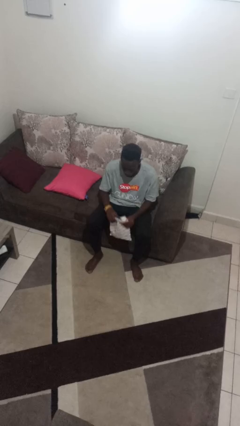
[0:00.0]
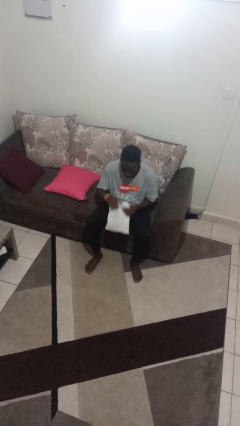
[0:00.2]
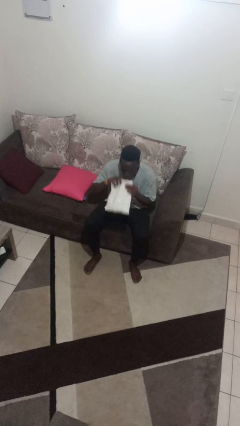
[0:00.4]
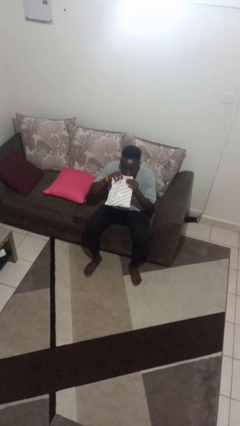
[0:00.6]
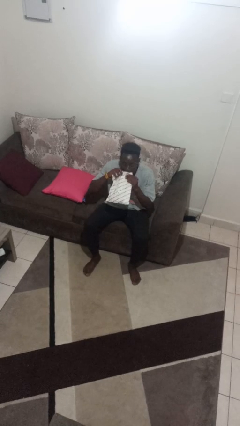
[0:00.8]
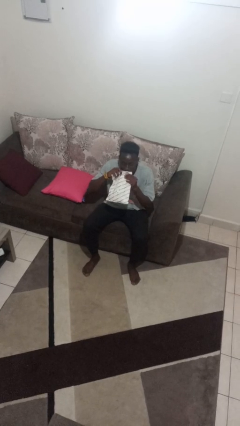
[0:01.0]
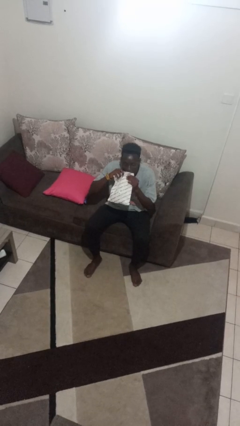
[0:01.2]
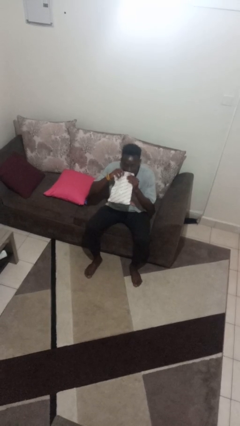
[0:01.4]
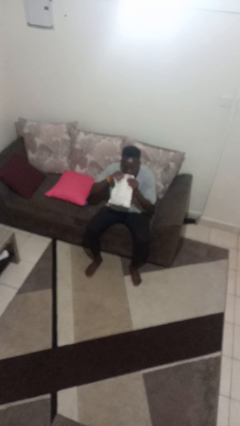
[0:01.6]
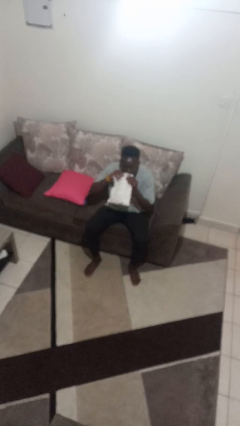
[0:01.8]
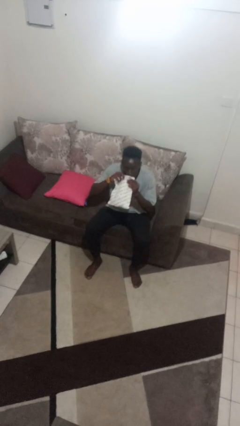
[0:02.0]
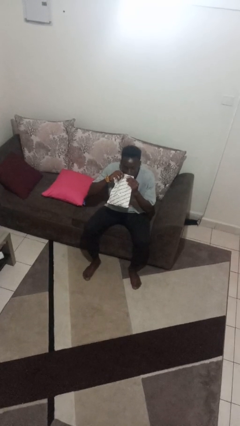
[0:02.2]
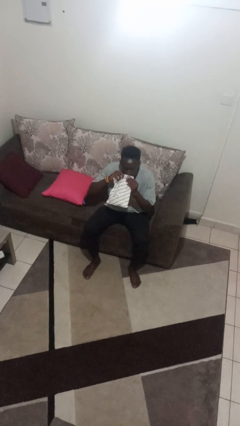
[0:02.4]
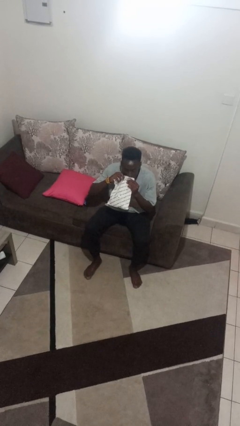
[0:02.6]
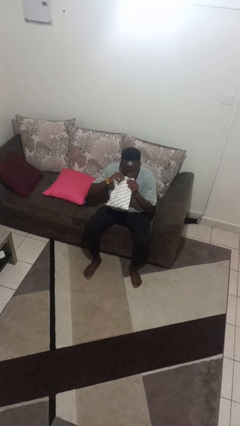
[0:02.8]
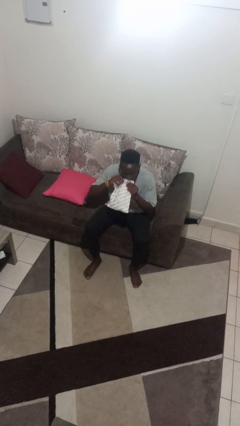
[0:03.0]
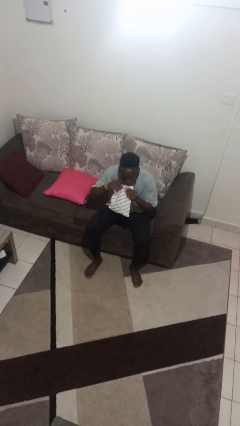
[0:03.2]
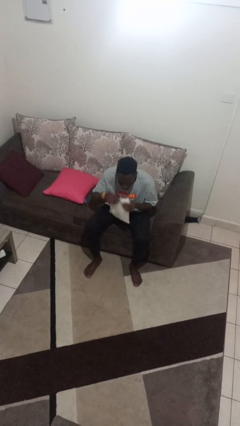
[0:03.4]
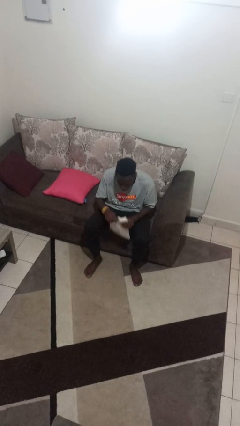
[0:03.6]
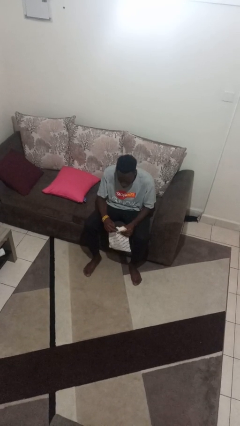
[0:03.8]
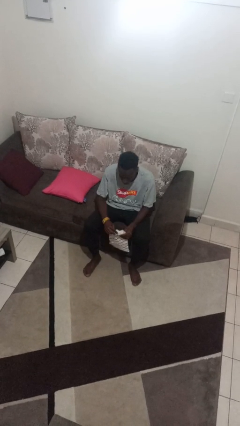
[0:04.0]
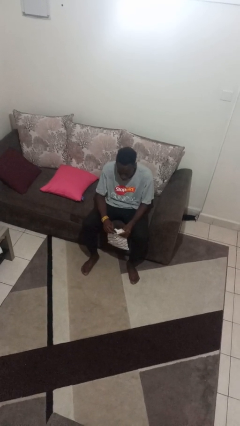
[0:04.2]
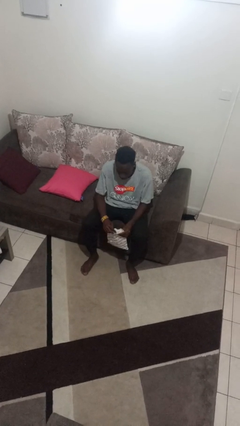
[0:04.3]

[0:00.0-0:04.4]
person eats snack from bag

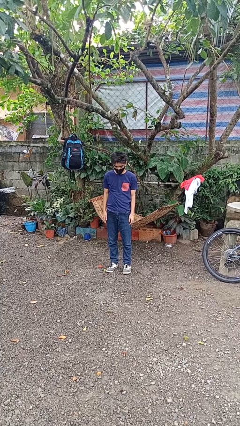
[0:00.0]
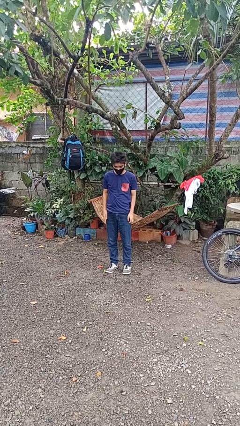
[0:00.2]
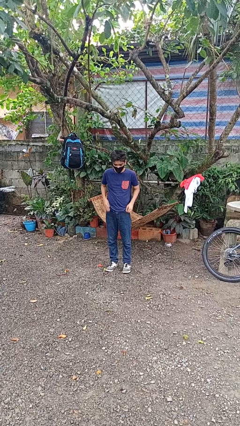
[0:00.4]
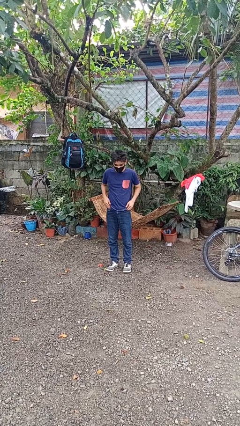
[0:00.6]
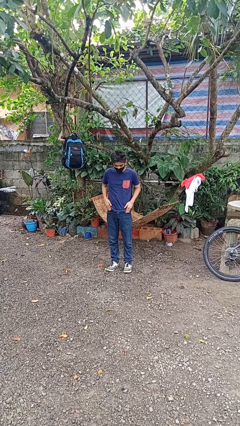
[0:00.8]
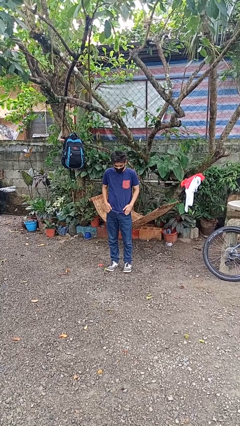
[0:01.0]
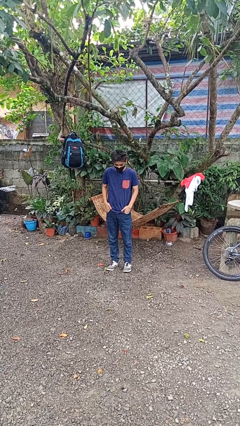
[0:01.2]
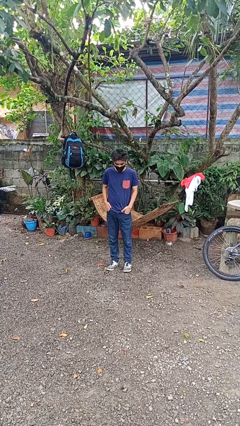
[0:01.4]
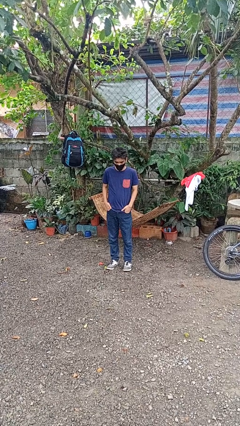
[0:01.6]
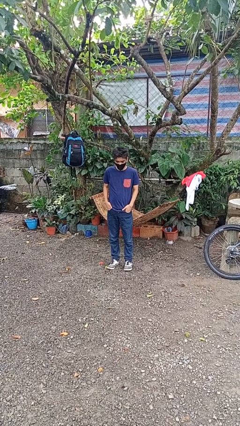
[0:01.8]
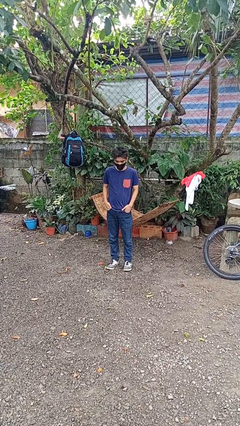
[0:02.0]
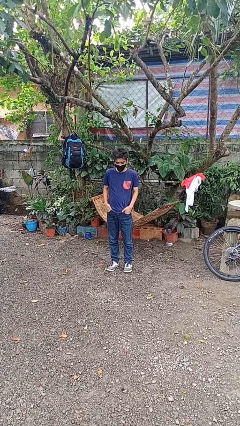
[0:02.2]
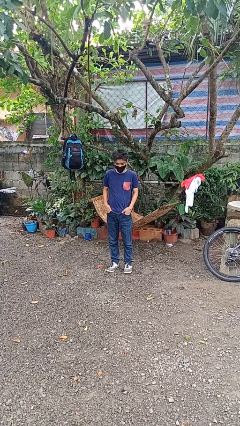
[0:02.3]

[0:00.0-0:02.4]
person puts hands in back pockets

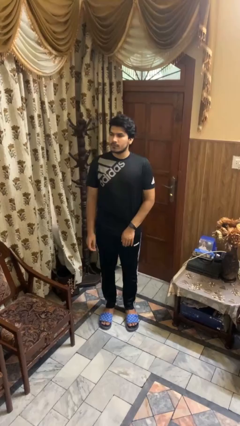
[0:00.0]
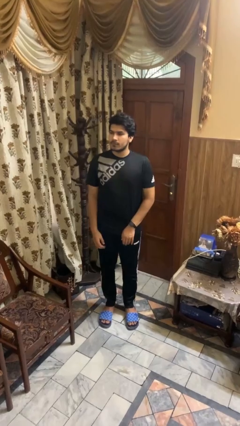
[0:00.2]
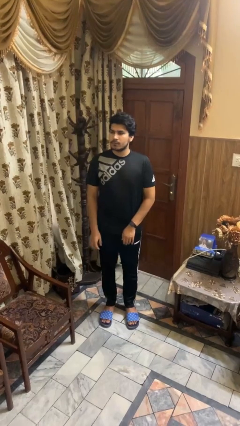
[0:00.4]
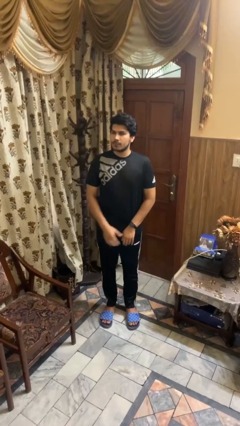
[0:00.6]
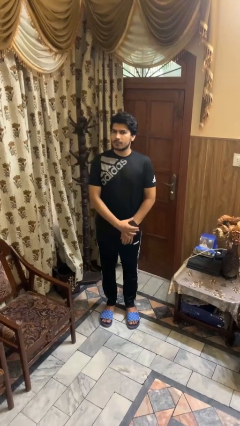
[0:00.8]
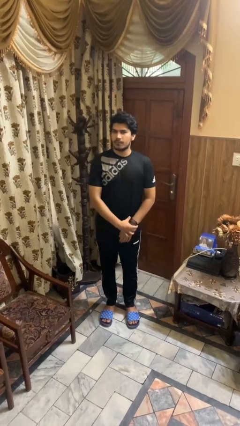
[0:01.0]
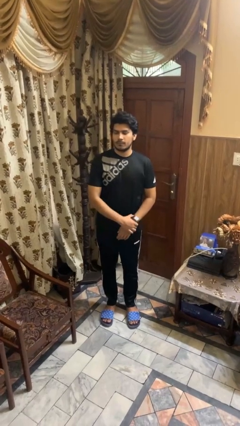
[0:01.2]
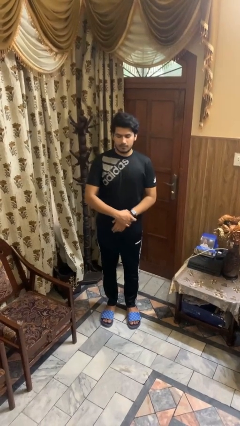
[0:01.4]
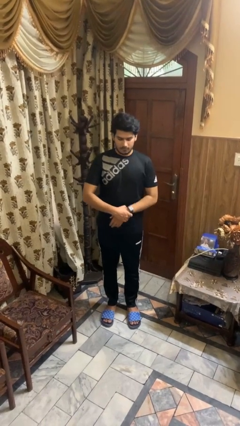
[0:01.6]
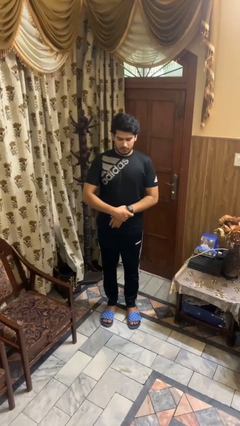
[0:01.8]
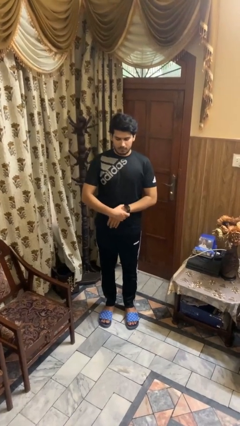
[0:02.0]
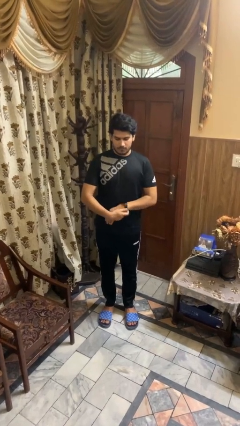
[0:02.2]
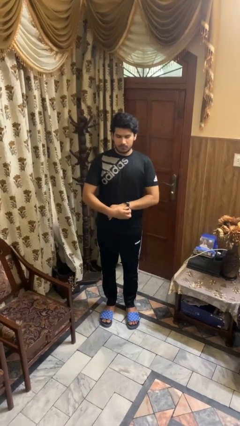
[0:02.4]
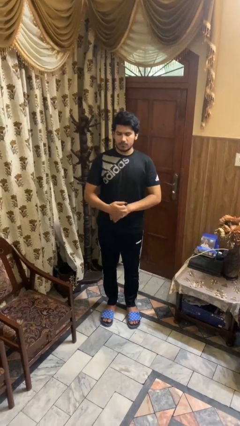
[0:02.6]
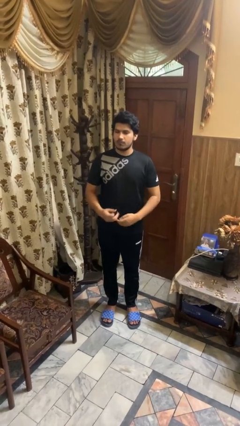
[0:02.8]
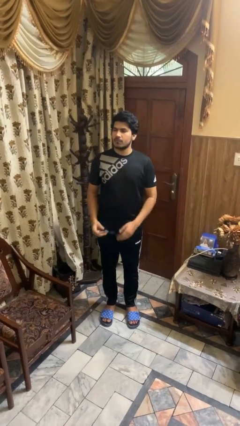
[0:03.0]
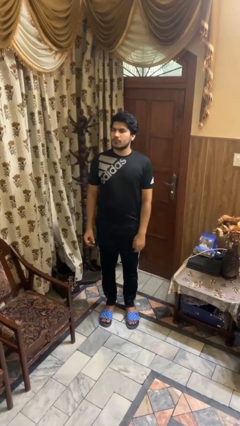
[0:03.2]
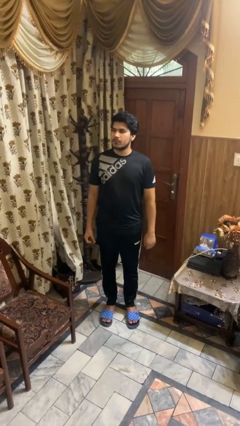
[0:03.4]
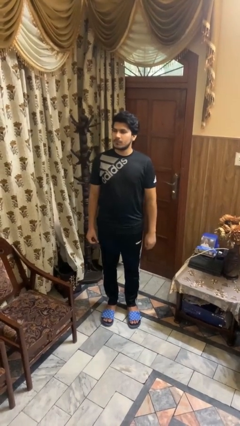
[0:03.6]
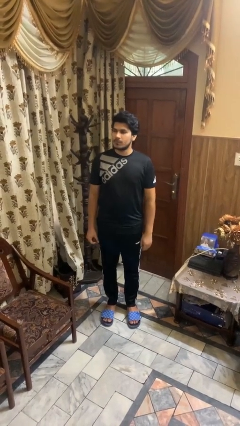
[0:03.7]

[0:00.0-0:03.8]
person takes off wristwatch

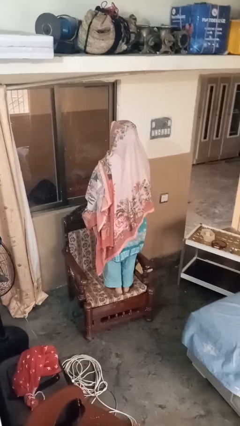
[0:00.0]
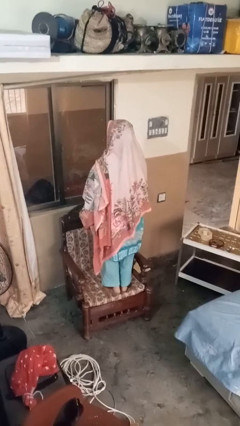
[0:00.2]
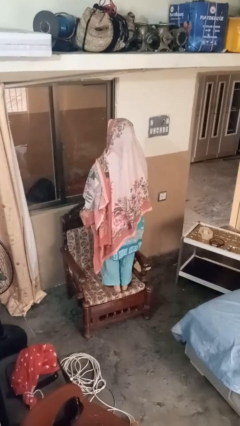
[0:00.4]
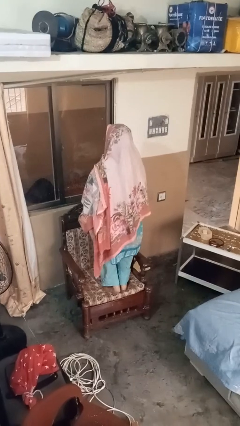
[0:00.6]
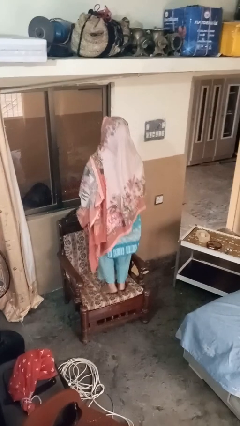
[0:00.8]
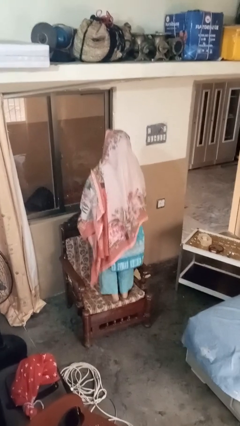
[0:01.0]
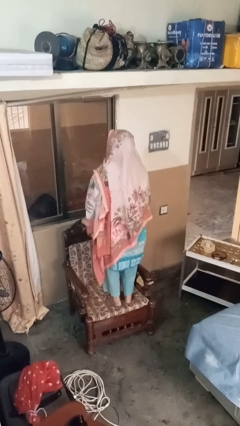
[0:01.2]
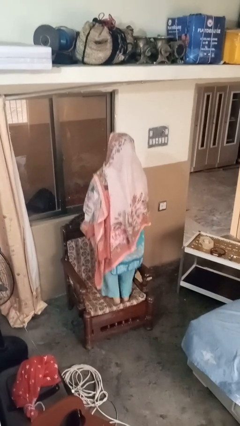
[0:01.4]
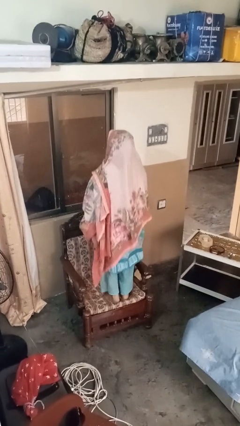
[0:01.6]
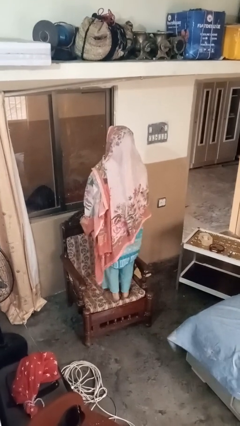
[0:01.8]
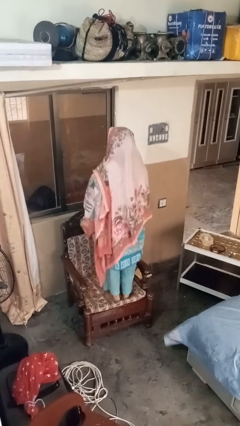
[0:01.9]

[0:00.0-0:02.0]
person jumps on couch

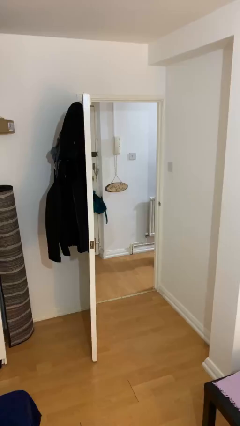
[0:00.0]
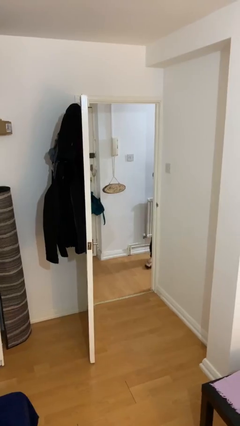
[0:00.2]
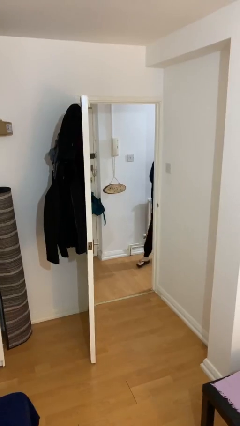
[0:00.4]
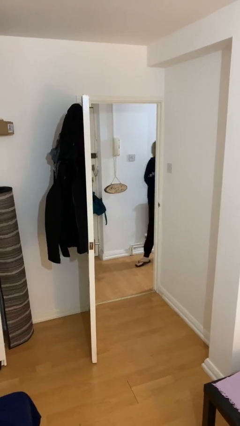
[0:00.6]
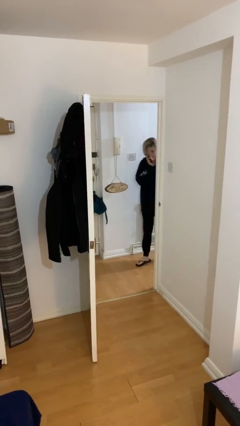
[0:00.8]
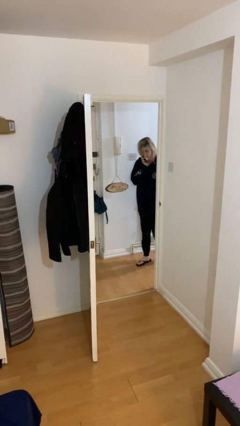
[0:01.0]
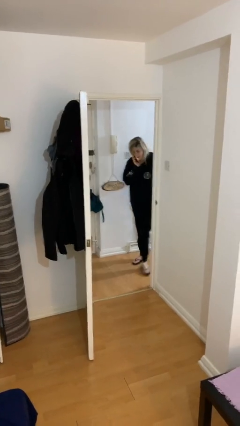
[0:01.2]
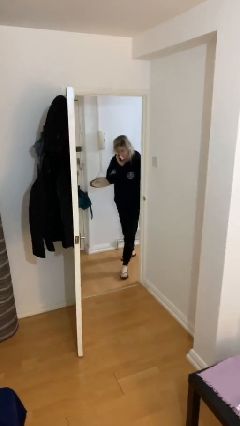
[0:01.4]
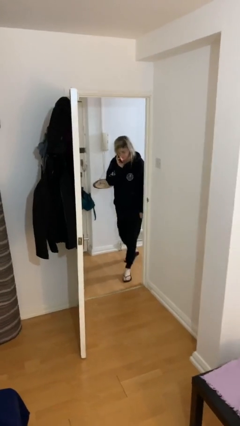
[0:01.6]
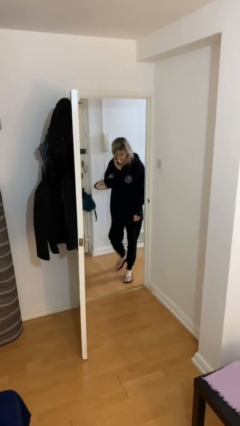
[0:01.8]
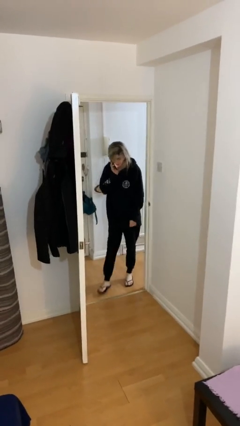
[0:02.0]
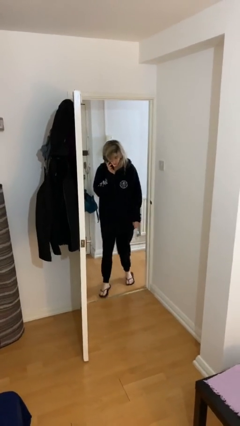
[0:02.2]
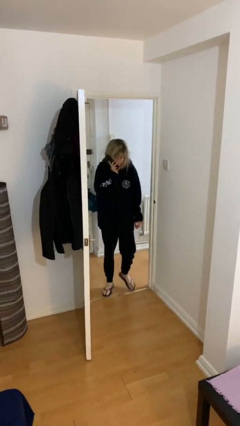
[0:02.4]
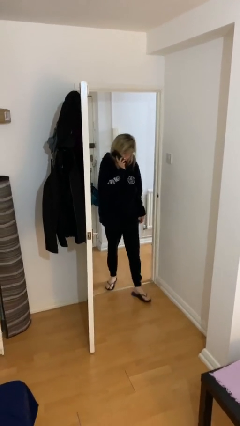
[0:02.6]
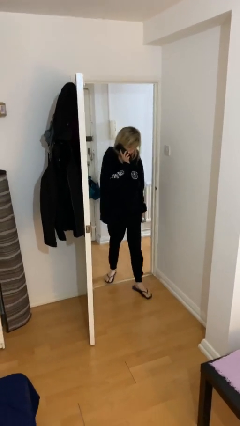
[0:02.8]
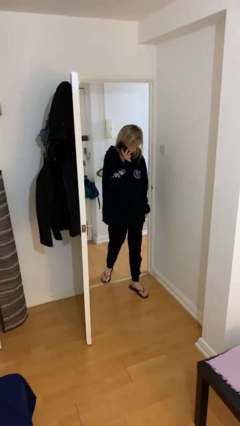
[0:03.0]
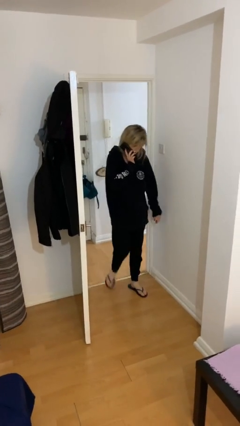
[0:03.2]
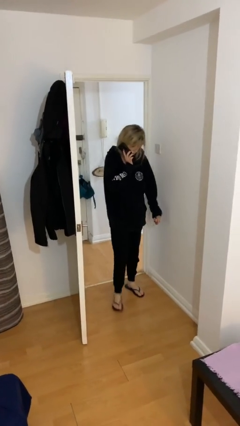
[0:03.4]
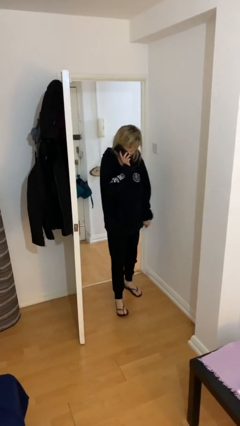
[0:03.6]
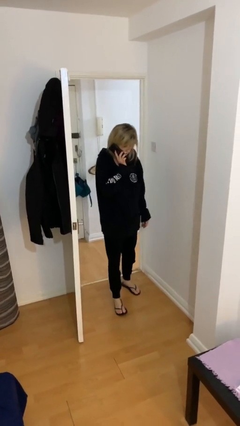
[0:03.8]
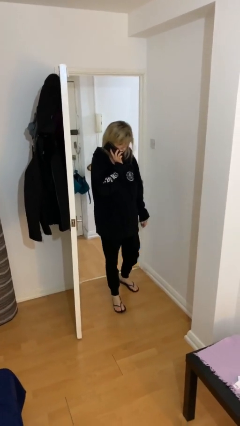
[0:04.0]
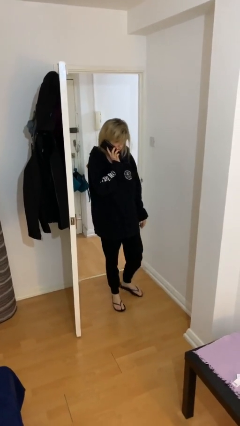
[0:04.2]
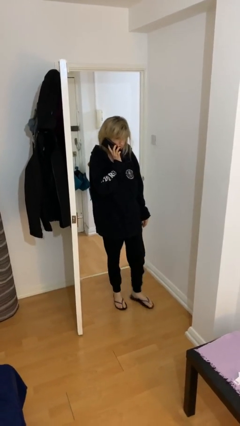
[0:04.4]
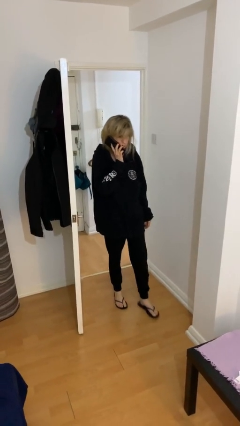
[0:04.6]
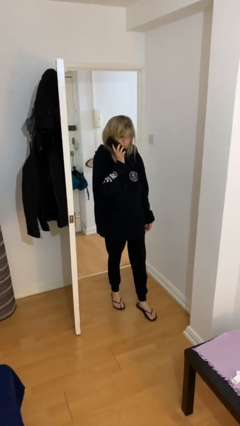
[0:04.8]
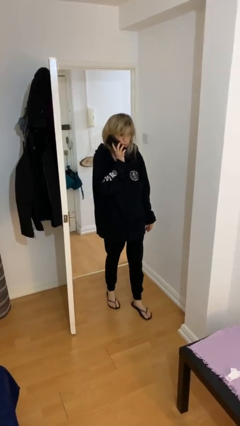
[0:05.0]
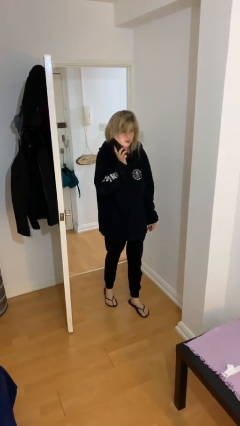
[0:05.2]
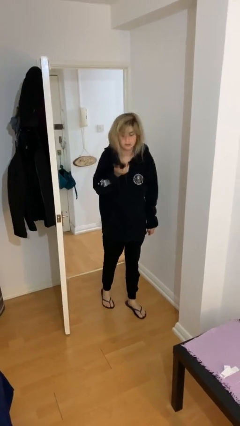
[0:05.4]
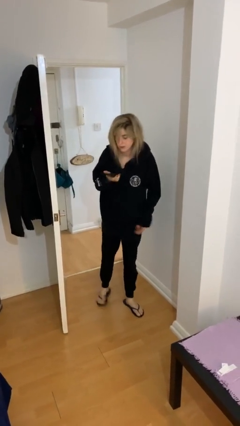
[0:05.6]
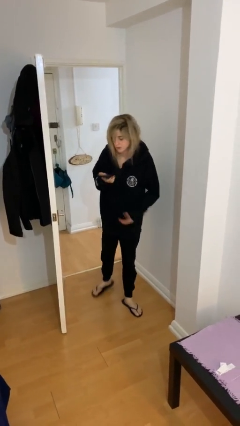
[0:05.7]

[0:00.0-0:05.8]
person enters scene through structure
